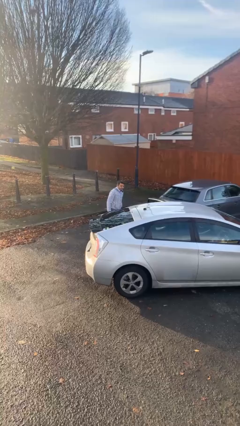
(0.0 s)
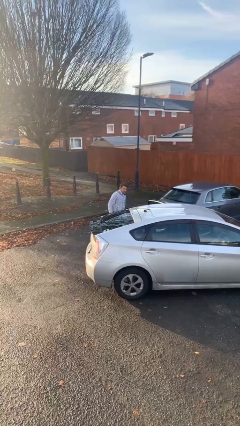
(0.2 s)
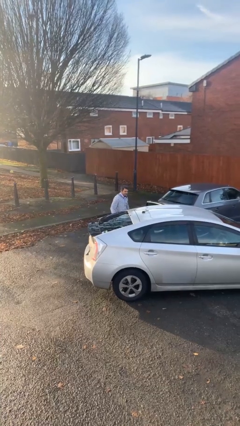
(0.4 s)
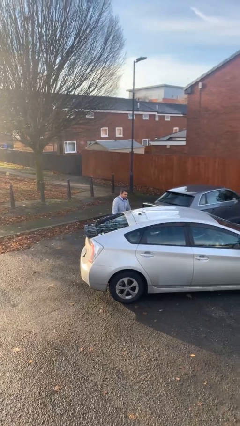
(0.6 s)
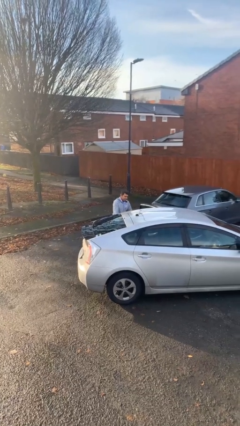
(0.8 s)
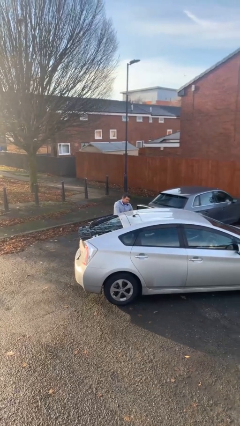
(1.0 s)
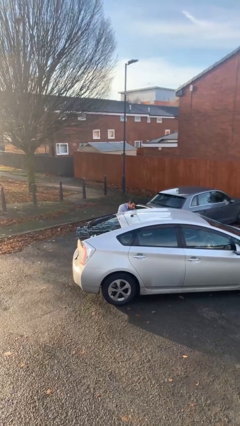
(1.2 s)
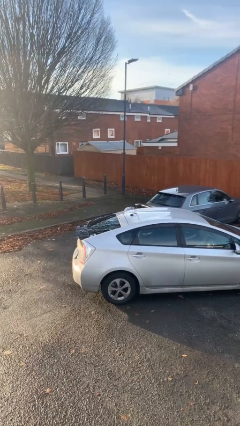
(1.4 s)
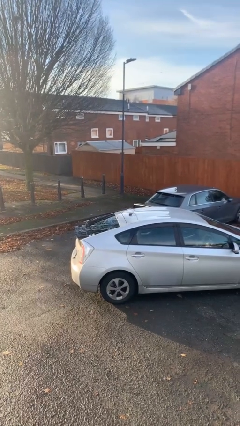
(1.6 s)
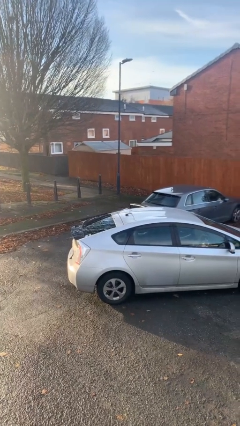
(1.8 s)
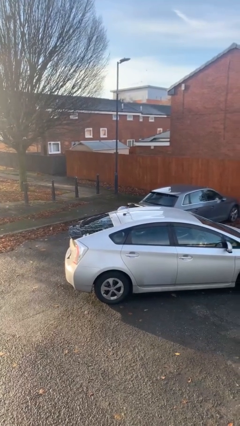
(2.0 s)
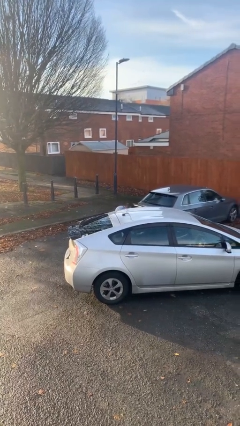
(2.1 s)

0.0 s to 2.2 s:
person unloads car

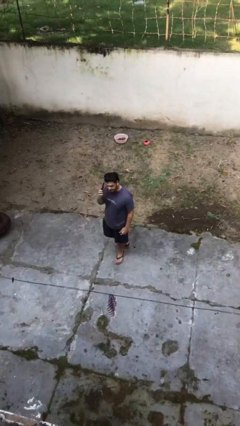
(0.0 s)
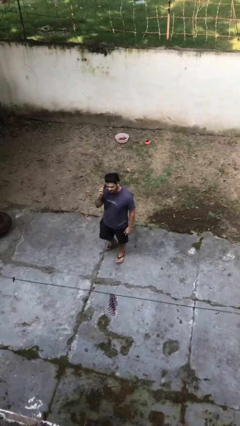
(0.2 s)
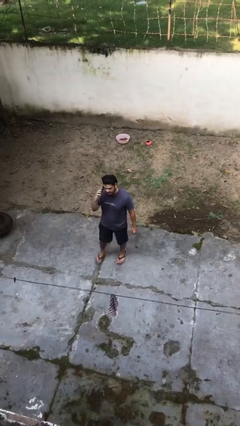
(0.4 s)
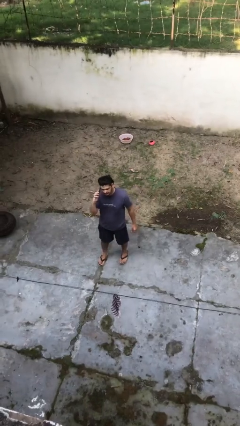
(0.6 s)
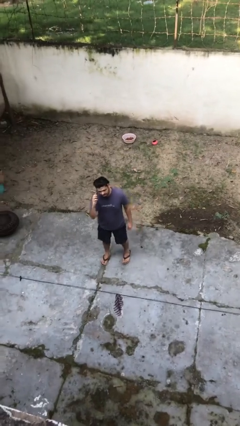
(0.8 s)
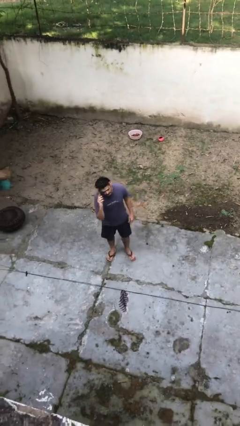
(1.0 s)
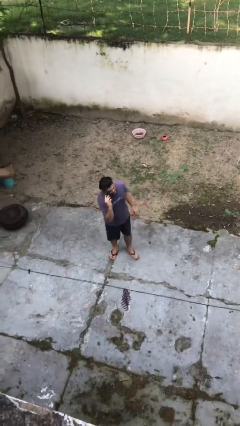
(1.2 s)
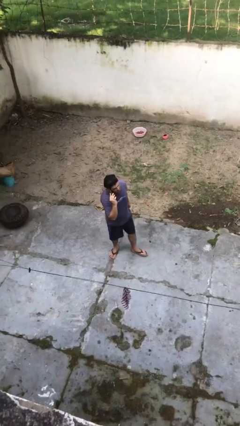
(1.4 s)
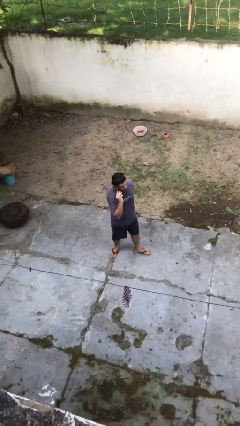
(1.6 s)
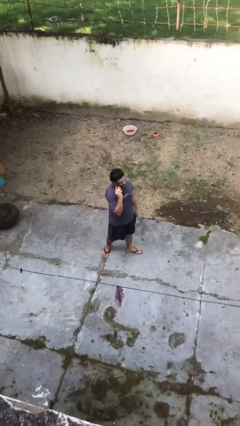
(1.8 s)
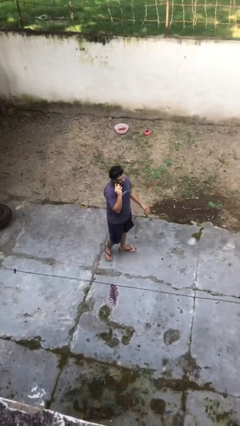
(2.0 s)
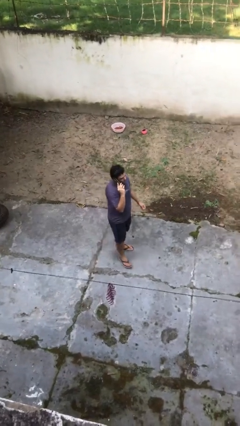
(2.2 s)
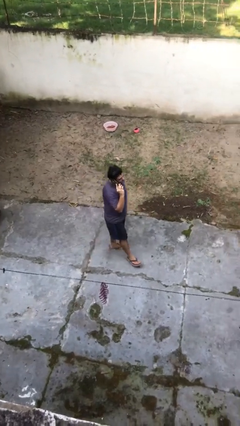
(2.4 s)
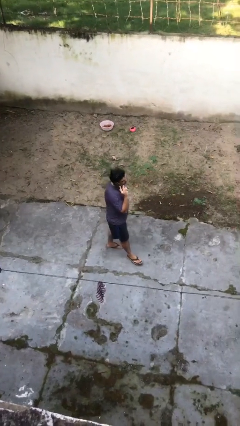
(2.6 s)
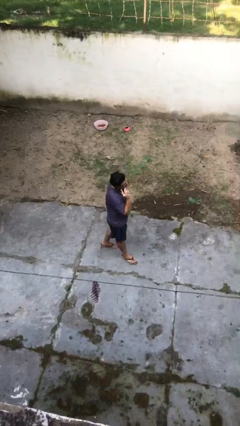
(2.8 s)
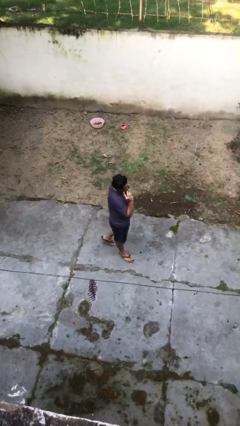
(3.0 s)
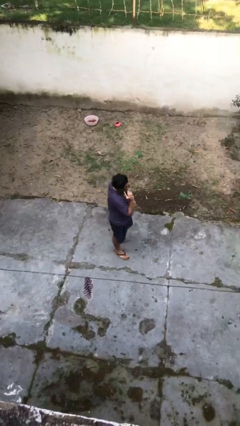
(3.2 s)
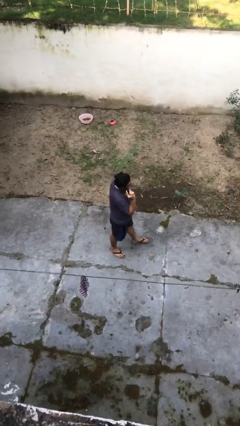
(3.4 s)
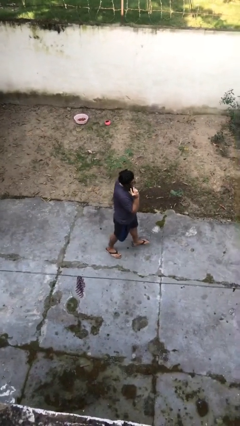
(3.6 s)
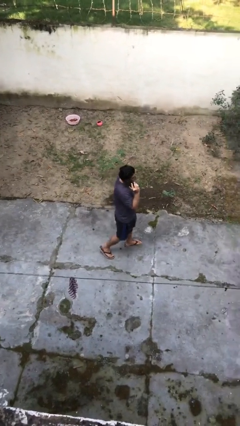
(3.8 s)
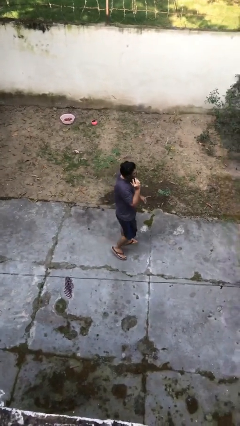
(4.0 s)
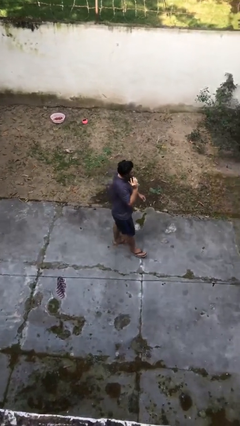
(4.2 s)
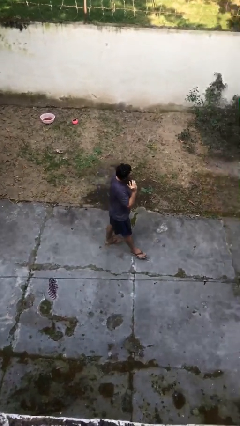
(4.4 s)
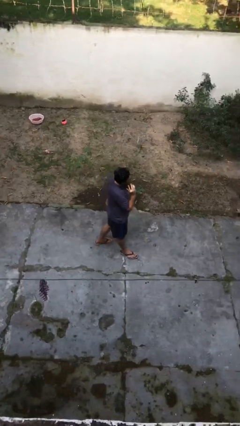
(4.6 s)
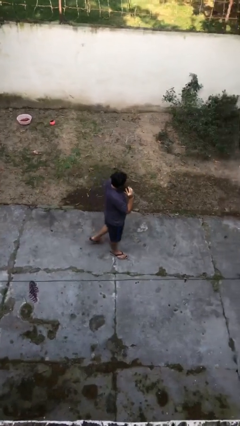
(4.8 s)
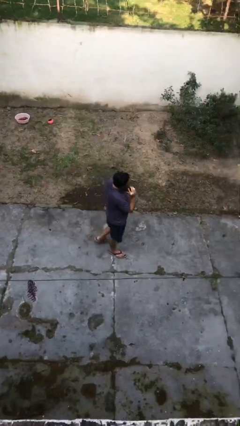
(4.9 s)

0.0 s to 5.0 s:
person talks on phone

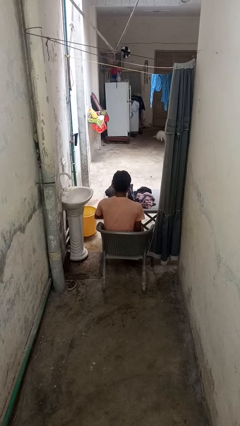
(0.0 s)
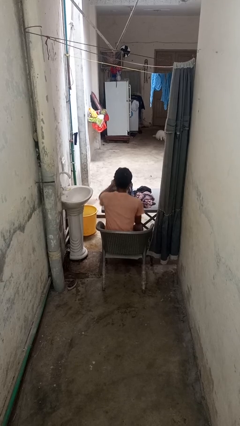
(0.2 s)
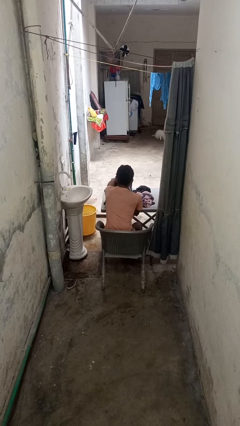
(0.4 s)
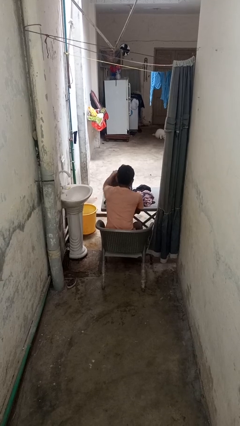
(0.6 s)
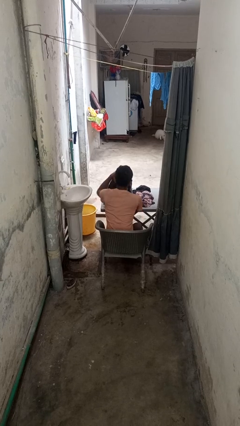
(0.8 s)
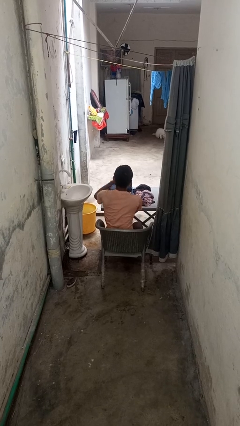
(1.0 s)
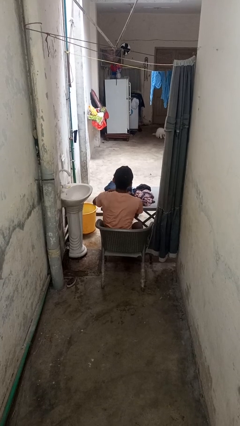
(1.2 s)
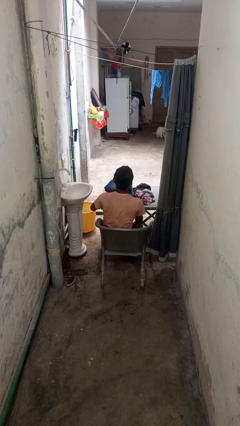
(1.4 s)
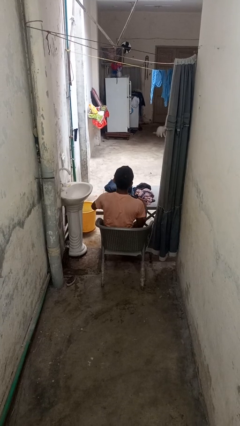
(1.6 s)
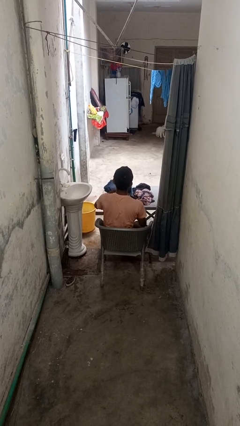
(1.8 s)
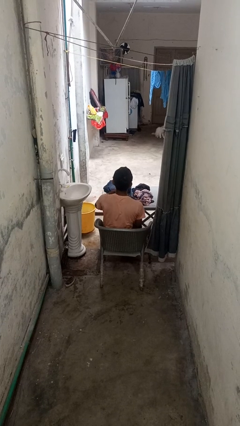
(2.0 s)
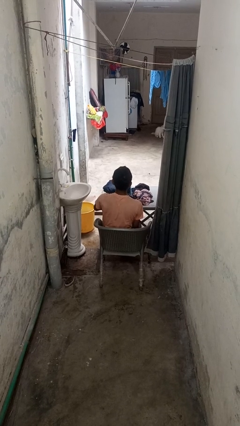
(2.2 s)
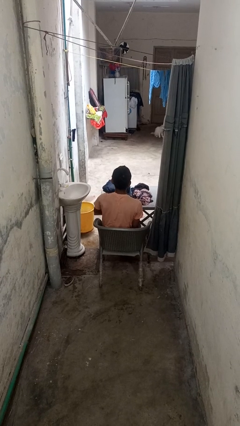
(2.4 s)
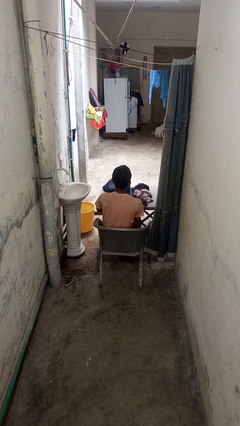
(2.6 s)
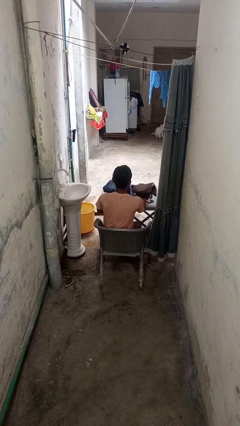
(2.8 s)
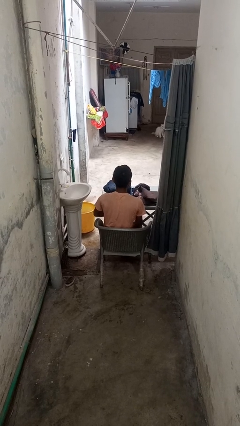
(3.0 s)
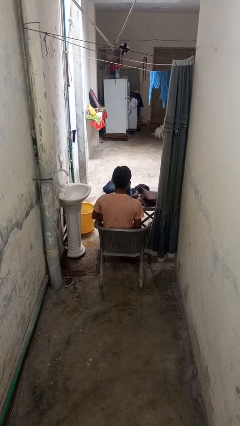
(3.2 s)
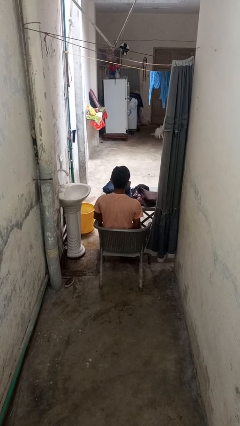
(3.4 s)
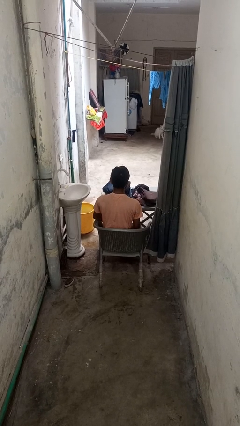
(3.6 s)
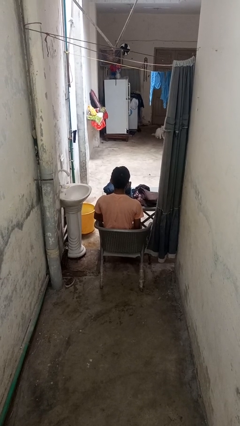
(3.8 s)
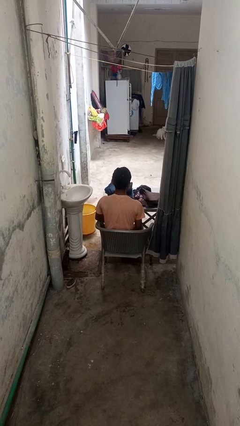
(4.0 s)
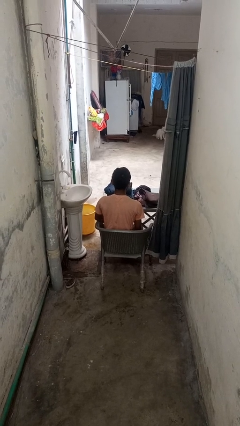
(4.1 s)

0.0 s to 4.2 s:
person folds pants

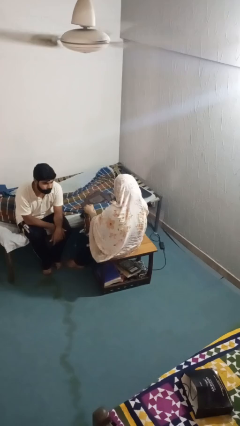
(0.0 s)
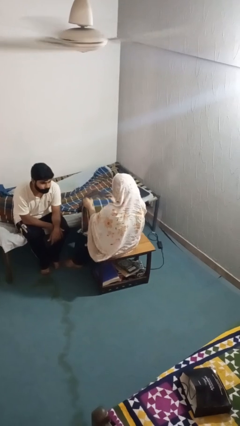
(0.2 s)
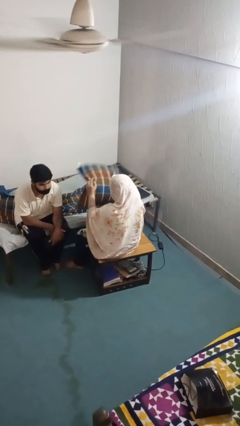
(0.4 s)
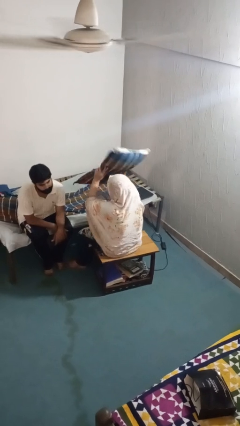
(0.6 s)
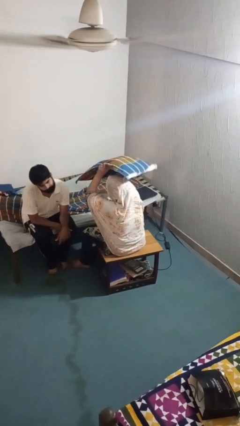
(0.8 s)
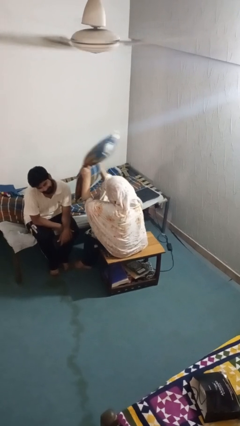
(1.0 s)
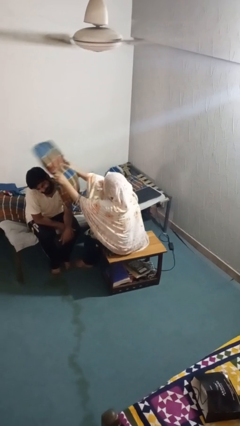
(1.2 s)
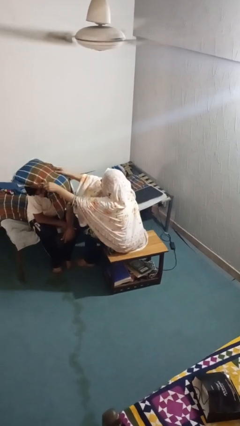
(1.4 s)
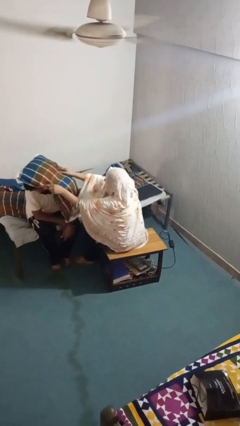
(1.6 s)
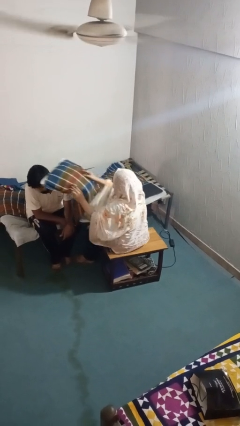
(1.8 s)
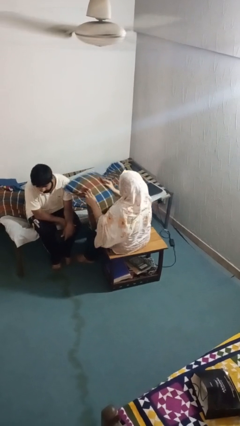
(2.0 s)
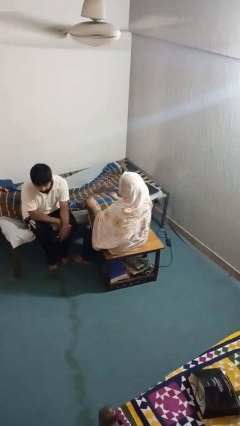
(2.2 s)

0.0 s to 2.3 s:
person hits person with pillow

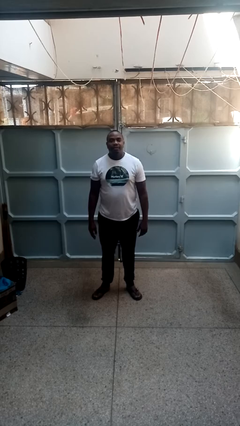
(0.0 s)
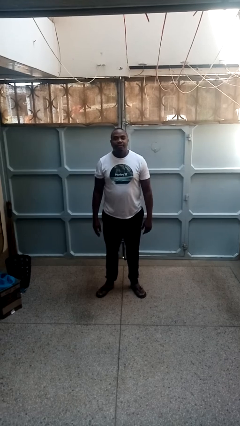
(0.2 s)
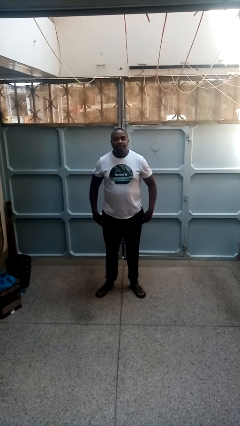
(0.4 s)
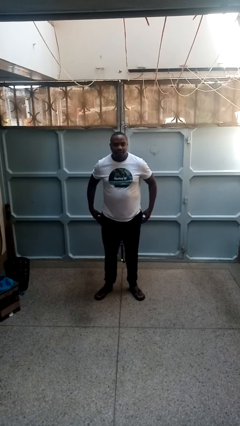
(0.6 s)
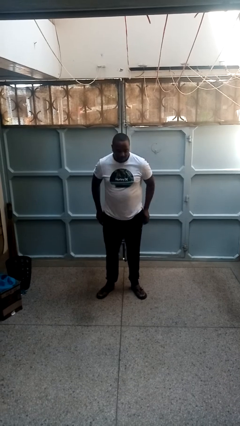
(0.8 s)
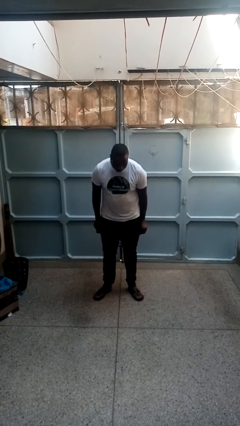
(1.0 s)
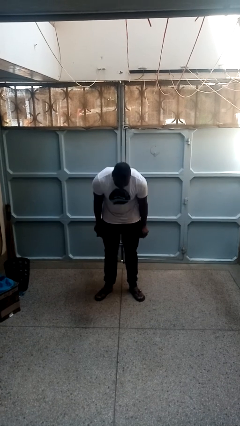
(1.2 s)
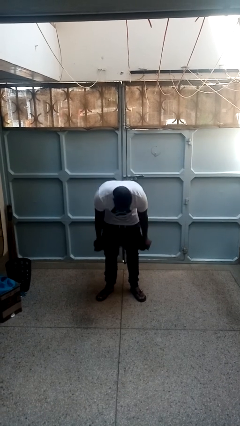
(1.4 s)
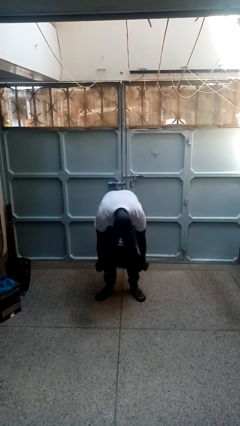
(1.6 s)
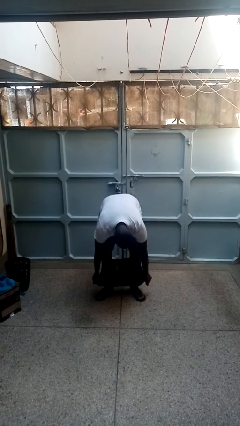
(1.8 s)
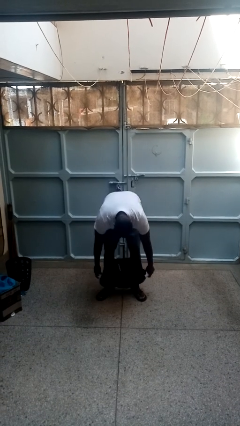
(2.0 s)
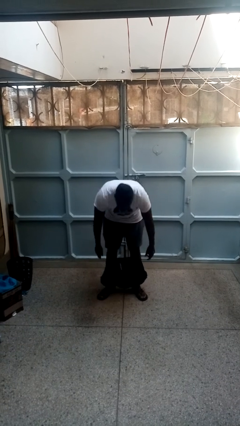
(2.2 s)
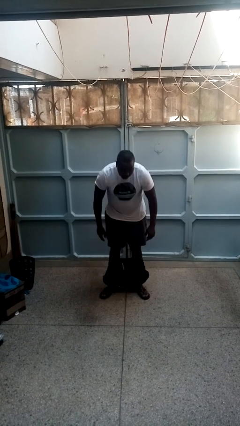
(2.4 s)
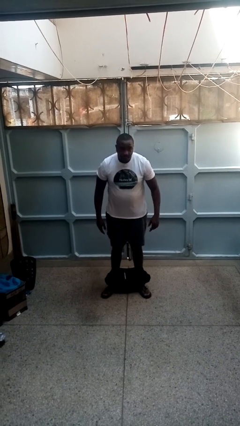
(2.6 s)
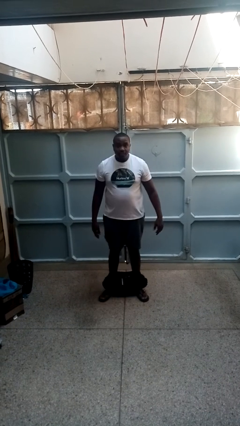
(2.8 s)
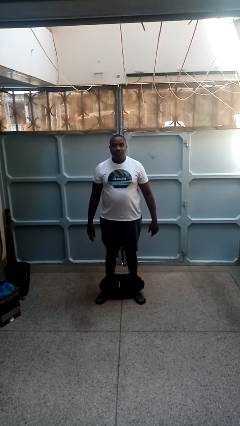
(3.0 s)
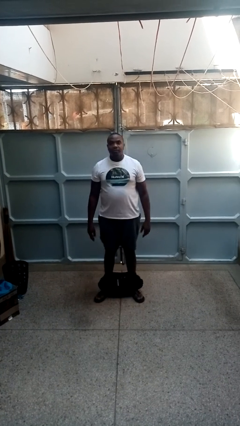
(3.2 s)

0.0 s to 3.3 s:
person takes off pants

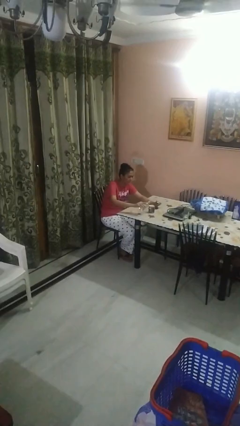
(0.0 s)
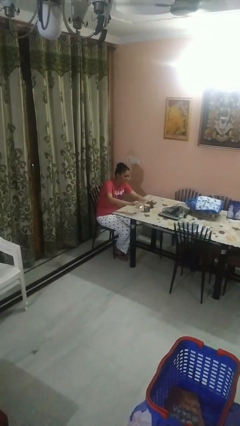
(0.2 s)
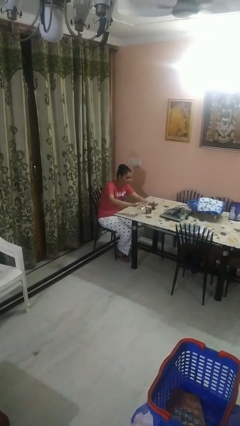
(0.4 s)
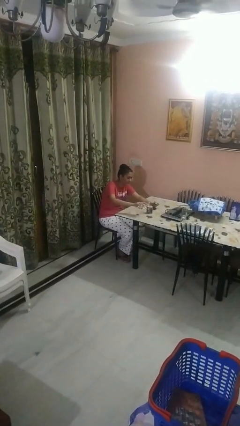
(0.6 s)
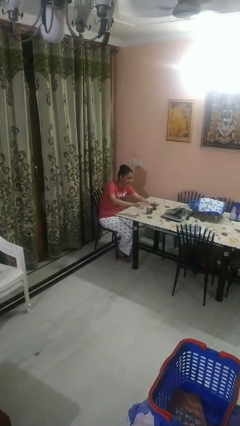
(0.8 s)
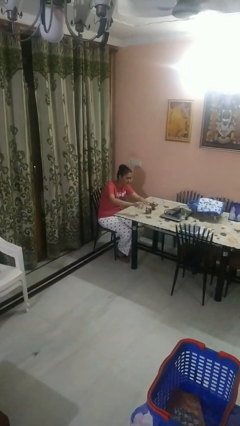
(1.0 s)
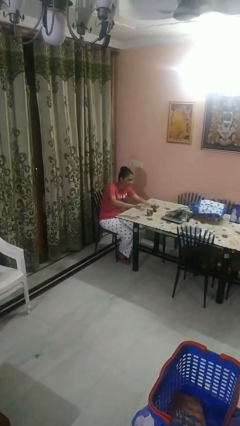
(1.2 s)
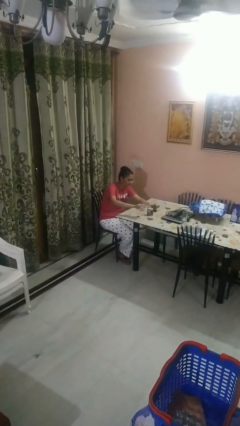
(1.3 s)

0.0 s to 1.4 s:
person pours liquid into cup
